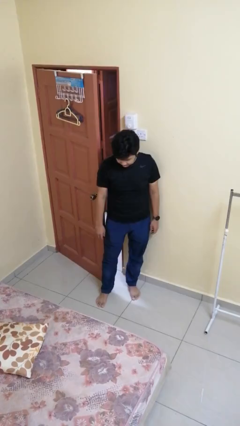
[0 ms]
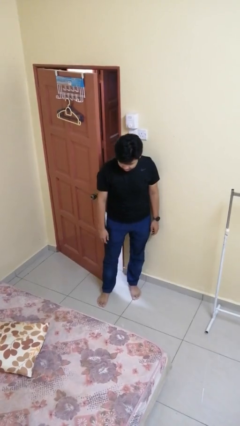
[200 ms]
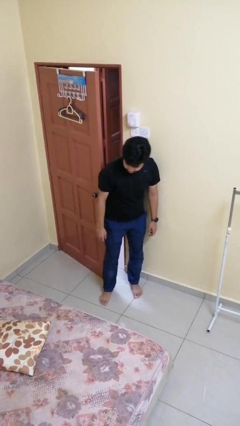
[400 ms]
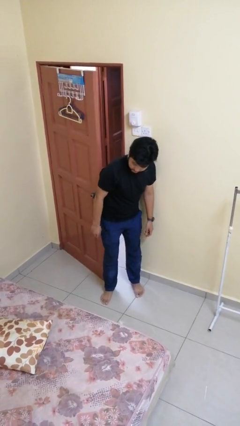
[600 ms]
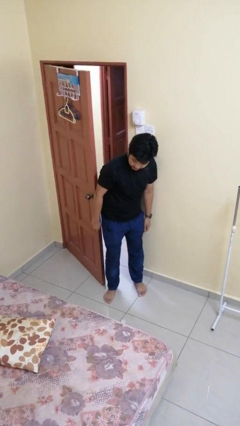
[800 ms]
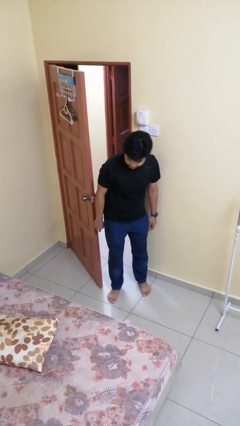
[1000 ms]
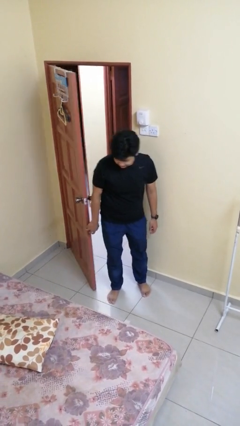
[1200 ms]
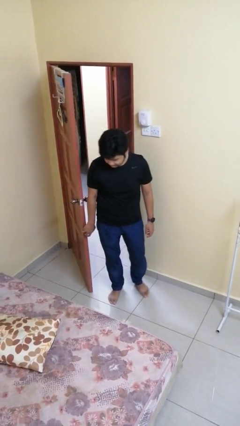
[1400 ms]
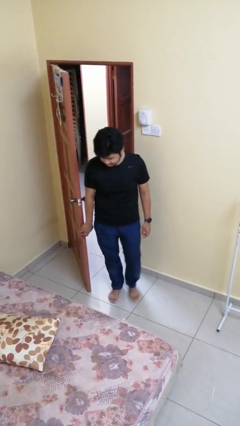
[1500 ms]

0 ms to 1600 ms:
person opens facility door

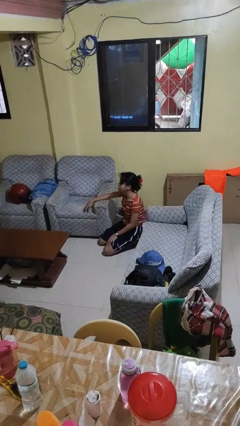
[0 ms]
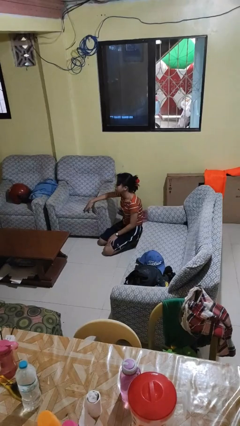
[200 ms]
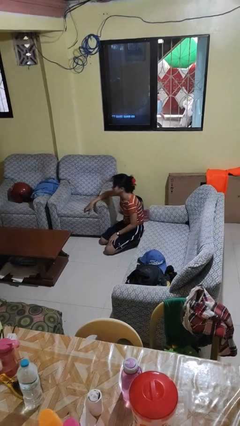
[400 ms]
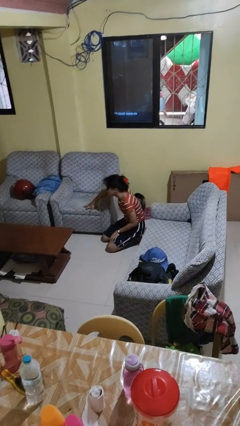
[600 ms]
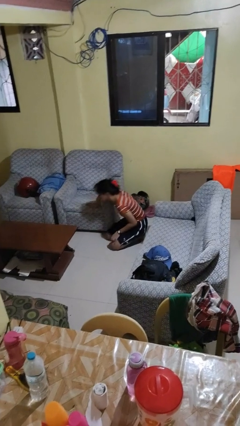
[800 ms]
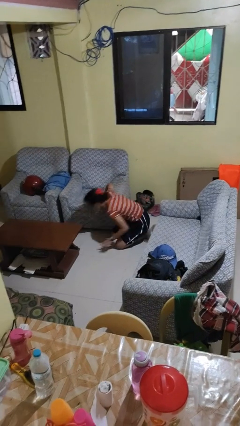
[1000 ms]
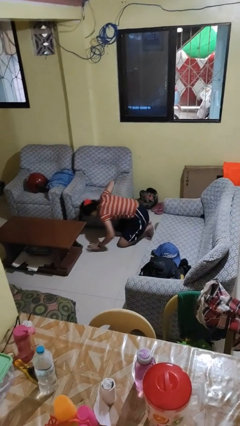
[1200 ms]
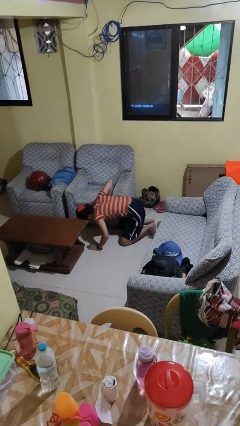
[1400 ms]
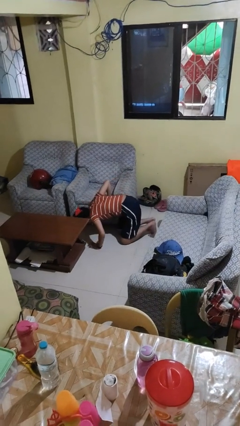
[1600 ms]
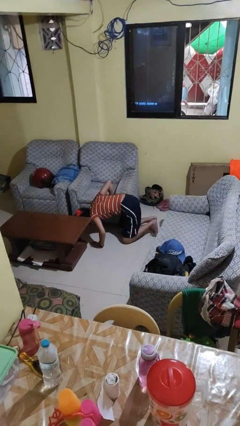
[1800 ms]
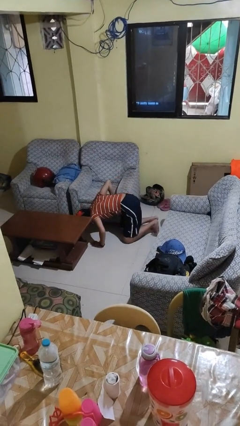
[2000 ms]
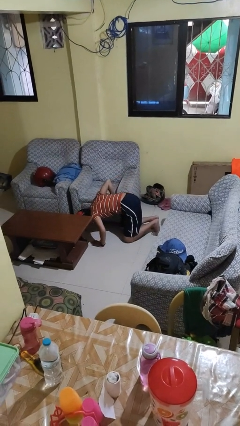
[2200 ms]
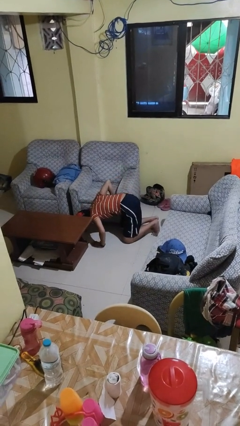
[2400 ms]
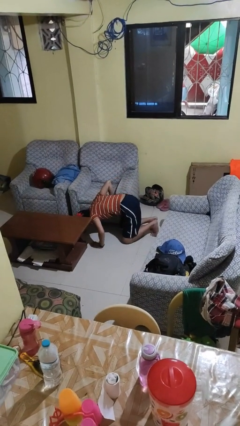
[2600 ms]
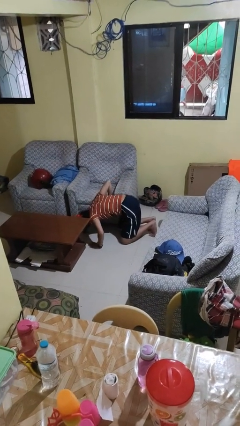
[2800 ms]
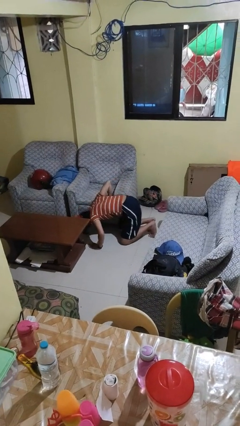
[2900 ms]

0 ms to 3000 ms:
person searches under couch

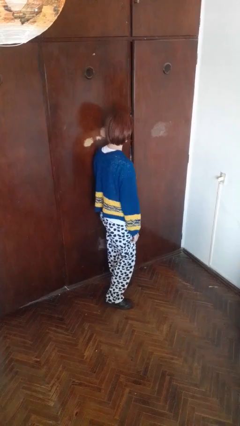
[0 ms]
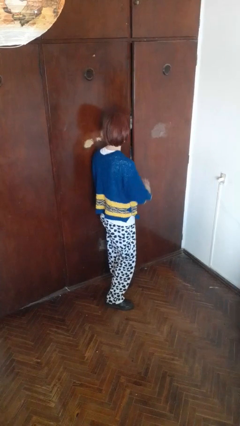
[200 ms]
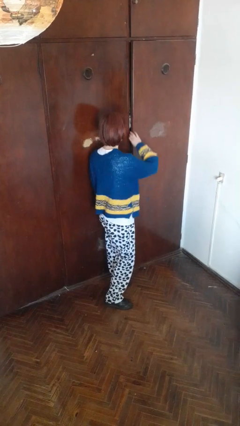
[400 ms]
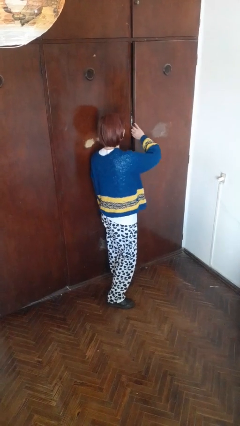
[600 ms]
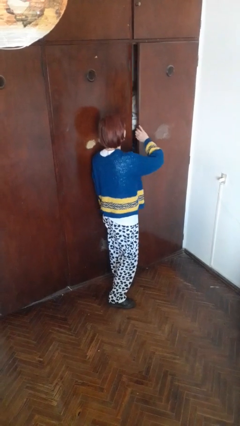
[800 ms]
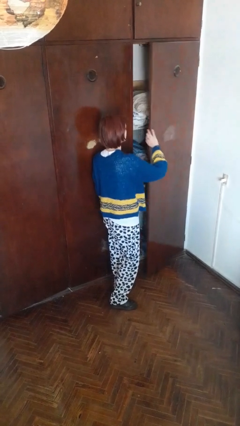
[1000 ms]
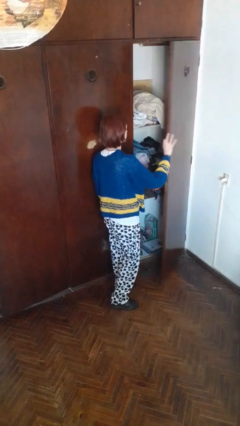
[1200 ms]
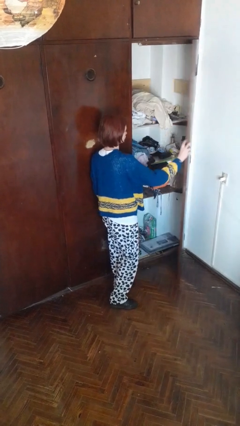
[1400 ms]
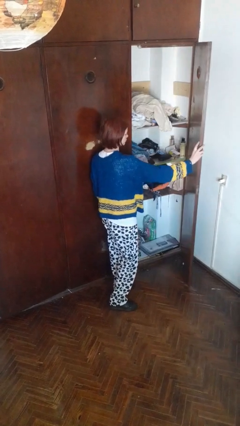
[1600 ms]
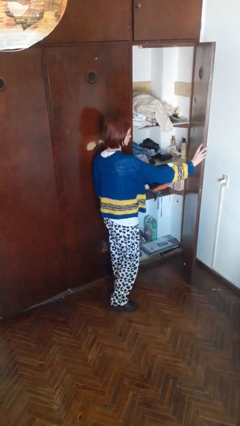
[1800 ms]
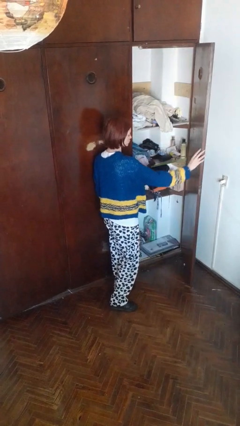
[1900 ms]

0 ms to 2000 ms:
person opens closet door

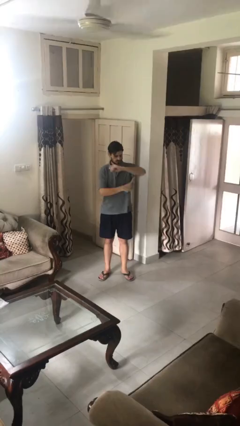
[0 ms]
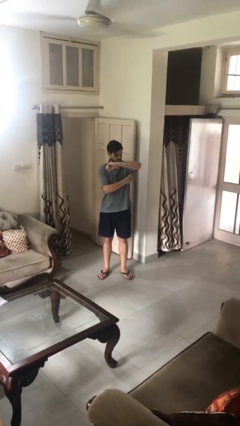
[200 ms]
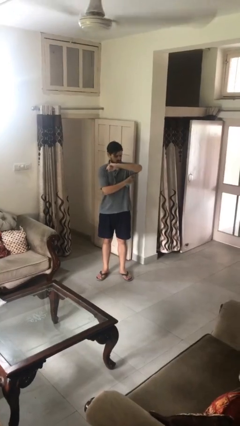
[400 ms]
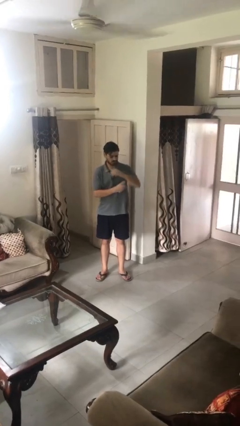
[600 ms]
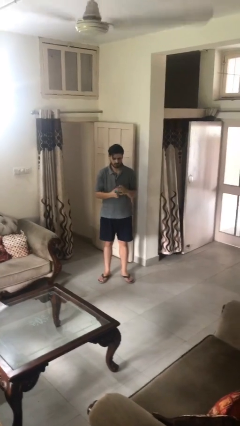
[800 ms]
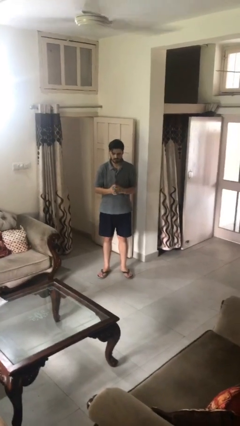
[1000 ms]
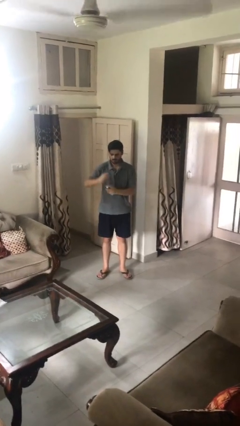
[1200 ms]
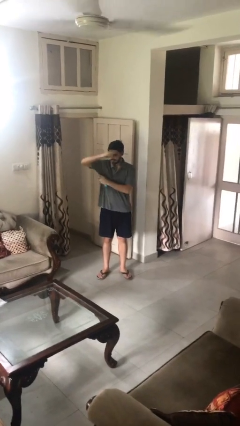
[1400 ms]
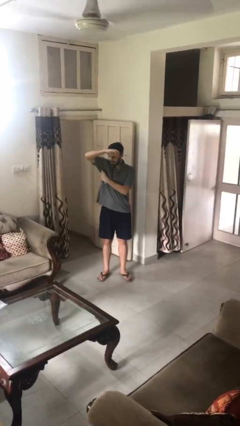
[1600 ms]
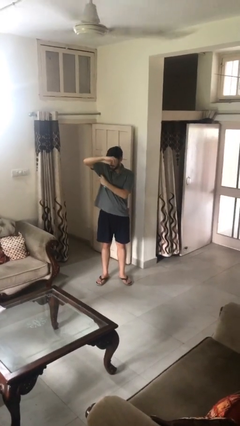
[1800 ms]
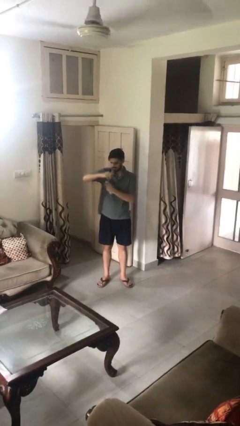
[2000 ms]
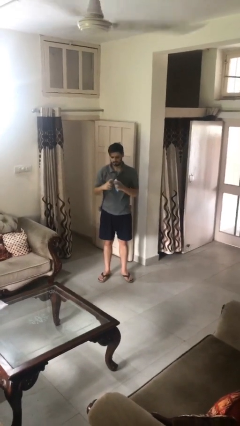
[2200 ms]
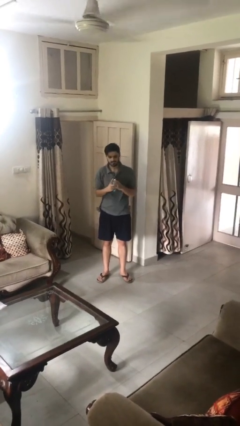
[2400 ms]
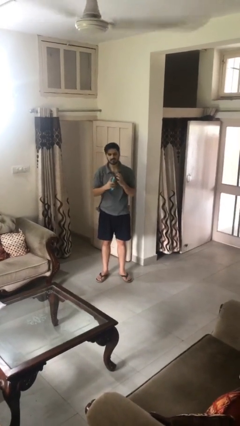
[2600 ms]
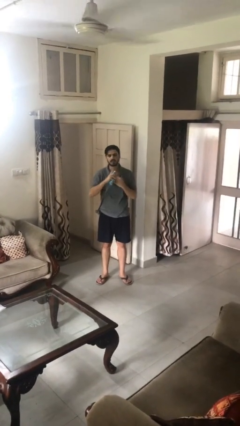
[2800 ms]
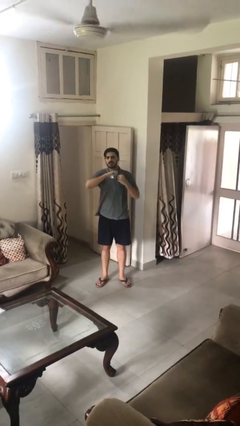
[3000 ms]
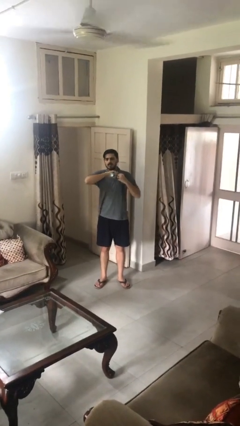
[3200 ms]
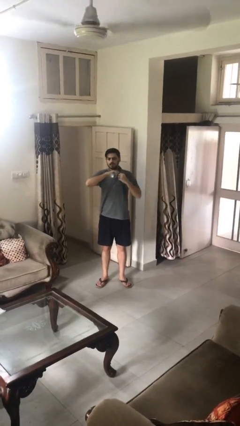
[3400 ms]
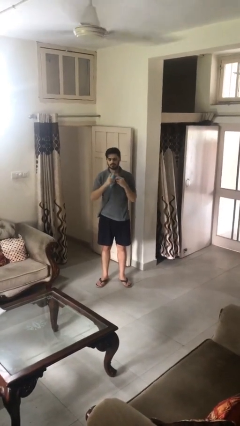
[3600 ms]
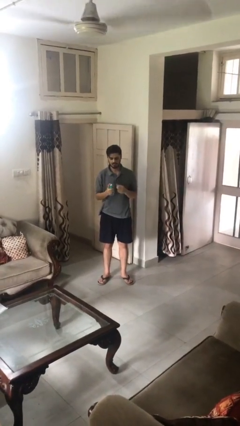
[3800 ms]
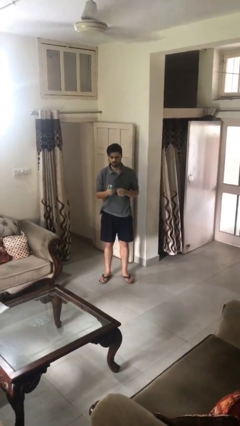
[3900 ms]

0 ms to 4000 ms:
person applies deodorant

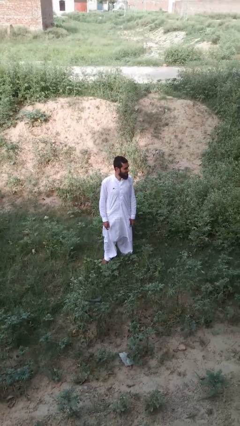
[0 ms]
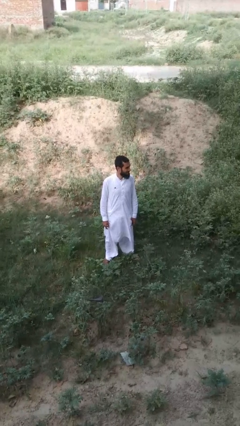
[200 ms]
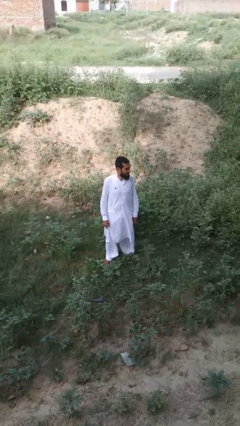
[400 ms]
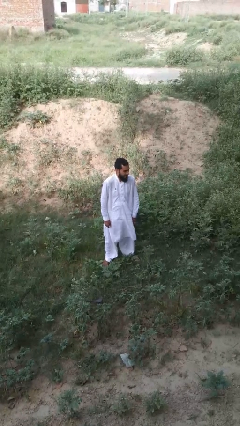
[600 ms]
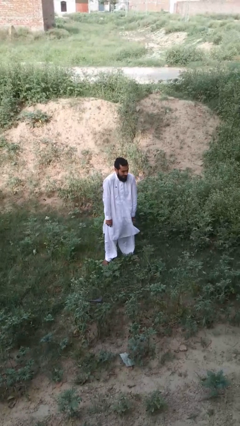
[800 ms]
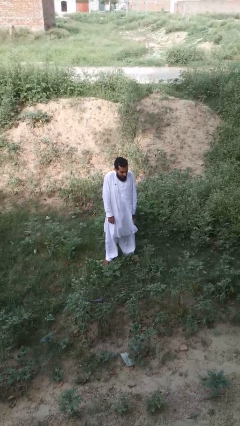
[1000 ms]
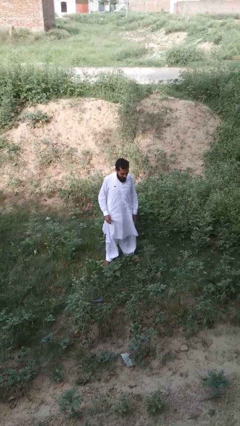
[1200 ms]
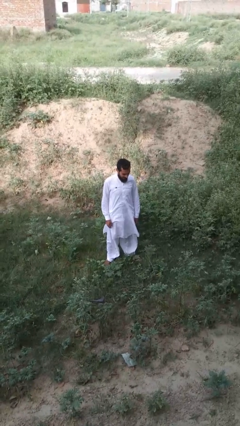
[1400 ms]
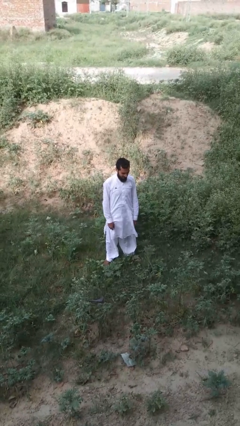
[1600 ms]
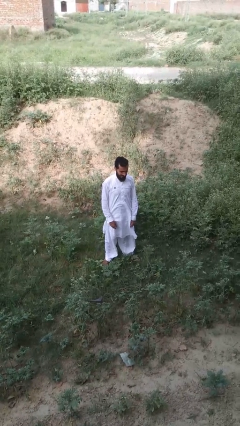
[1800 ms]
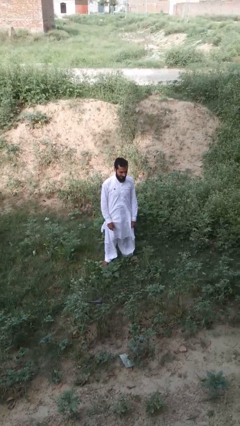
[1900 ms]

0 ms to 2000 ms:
person shrugs

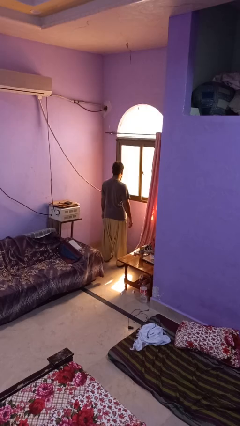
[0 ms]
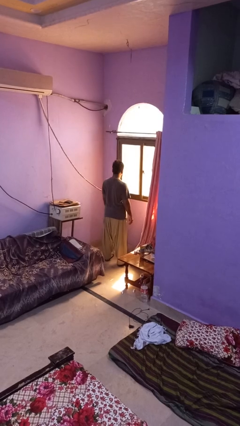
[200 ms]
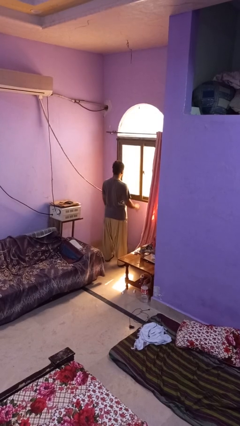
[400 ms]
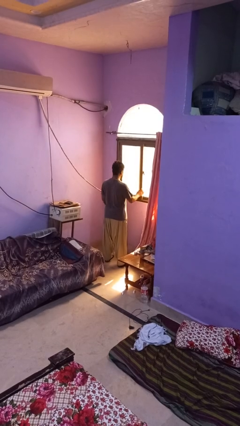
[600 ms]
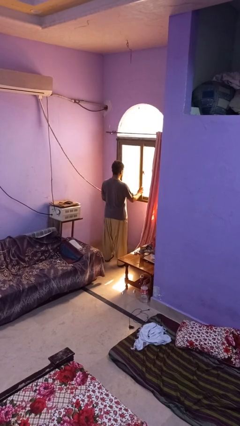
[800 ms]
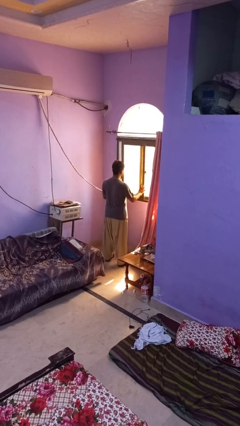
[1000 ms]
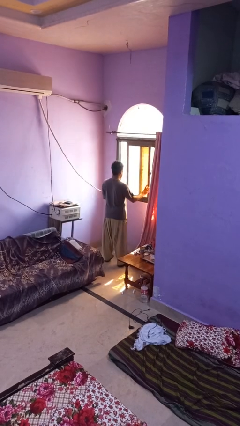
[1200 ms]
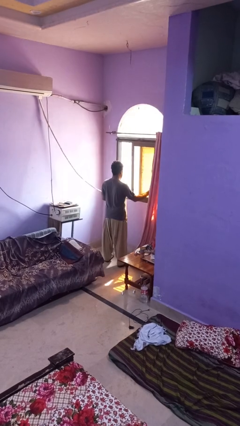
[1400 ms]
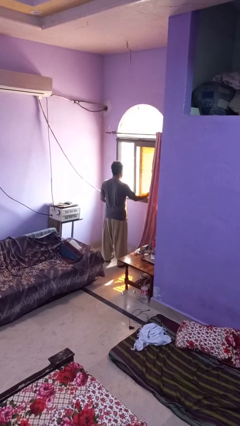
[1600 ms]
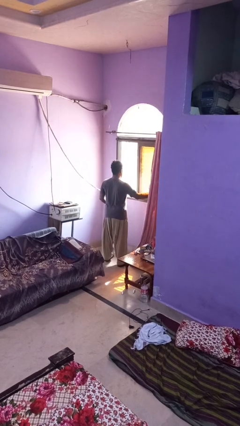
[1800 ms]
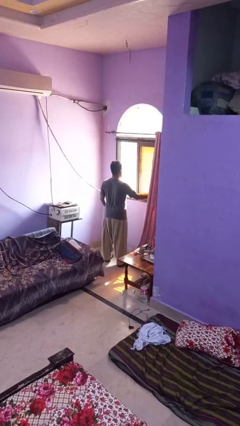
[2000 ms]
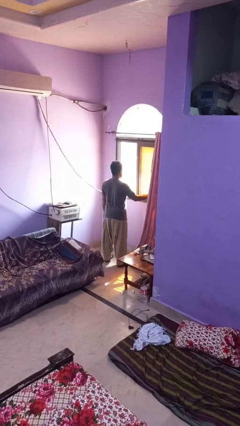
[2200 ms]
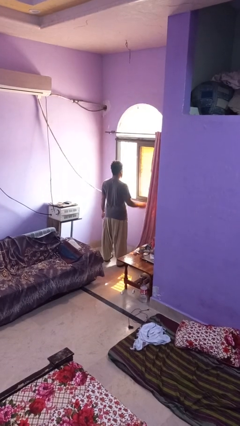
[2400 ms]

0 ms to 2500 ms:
person opens home window

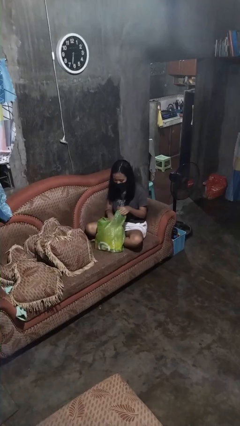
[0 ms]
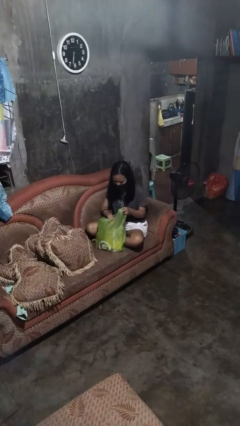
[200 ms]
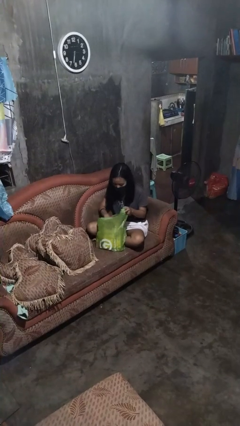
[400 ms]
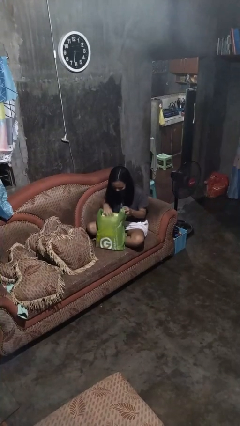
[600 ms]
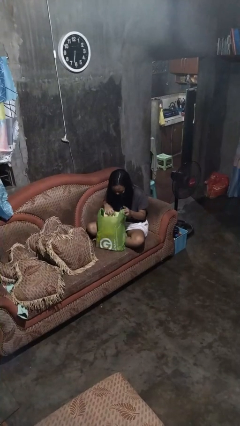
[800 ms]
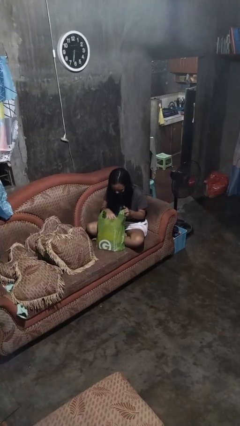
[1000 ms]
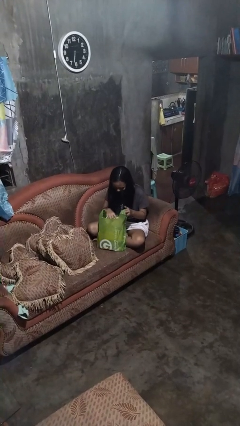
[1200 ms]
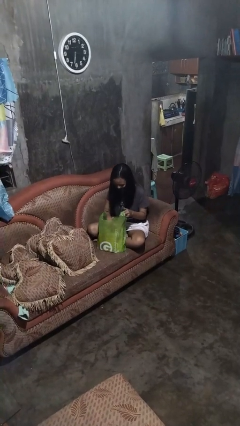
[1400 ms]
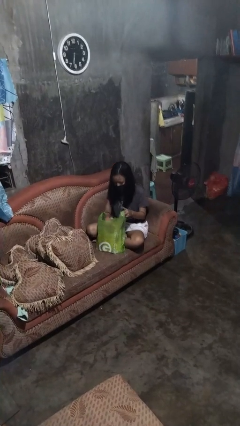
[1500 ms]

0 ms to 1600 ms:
person searches in bag

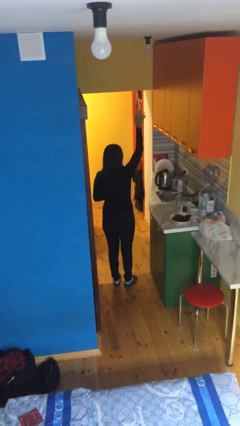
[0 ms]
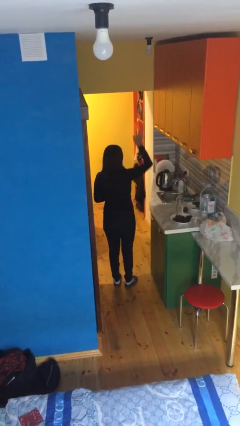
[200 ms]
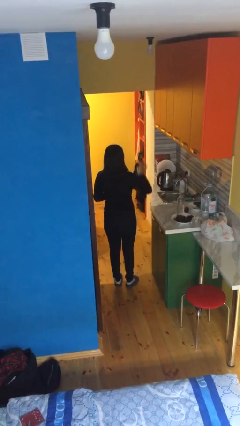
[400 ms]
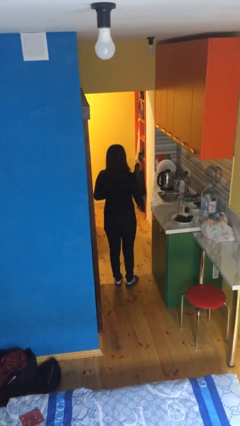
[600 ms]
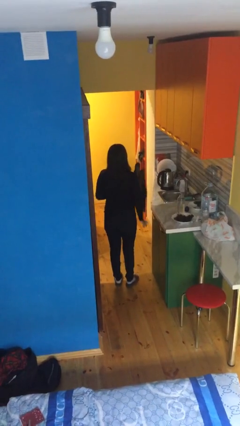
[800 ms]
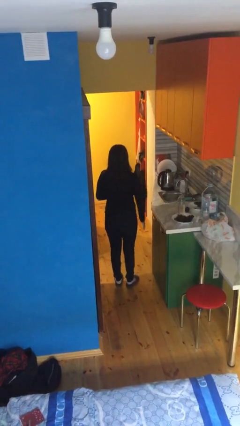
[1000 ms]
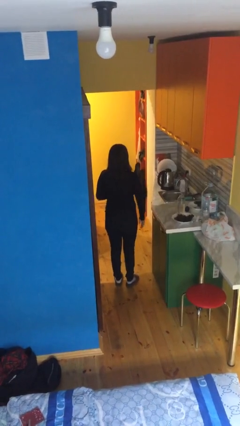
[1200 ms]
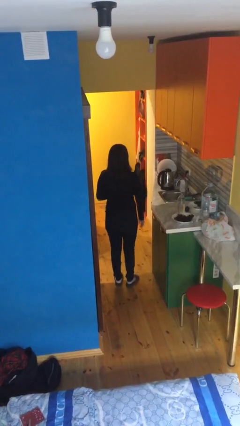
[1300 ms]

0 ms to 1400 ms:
person gestures swipe down
